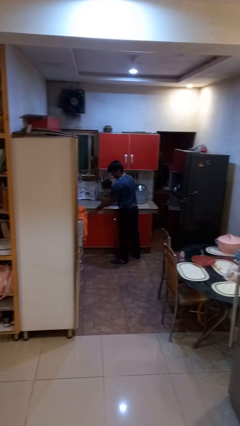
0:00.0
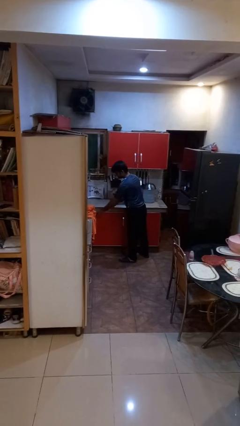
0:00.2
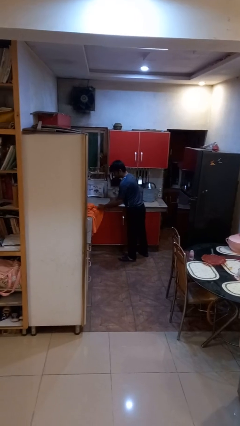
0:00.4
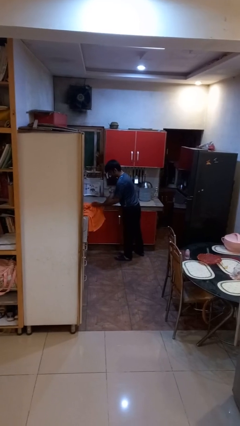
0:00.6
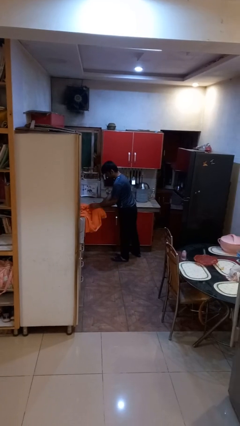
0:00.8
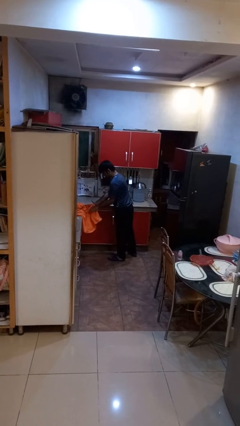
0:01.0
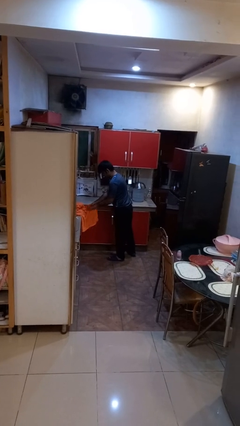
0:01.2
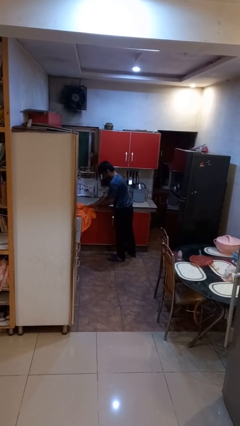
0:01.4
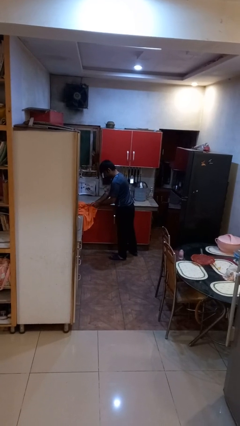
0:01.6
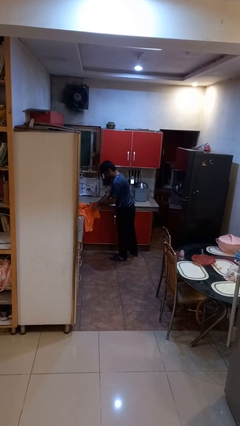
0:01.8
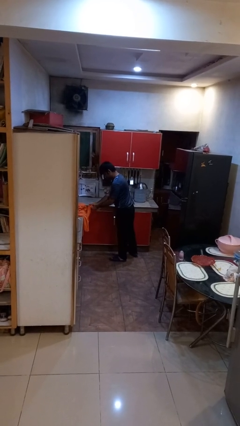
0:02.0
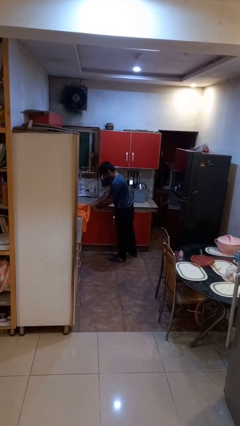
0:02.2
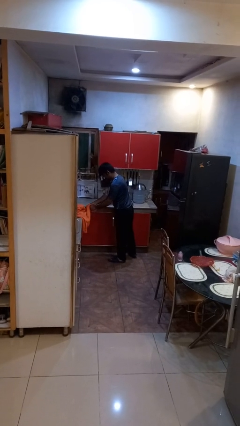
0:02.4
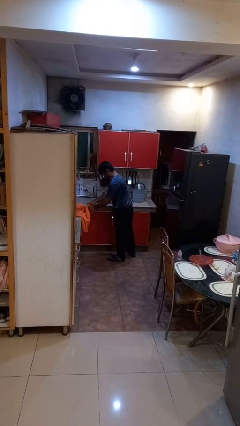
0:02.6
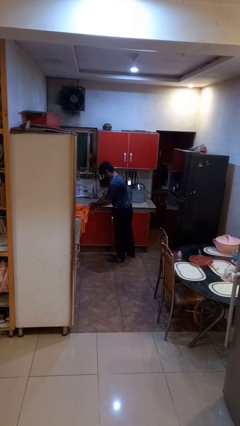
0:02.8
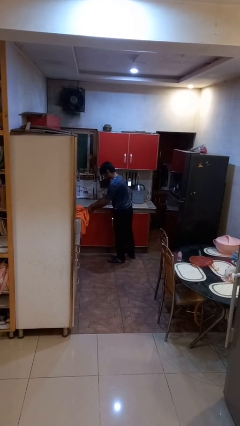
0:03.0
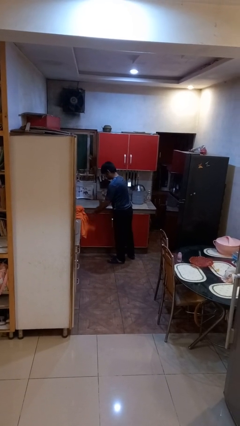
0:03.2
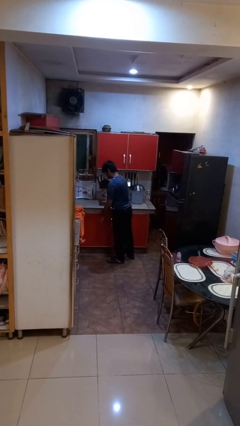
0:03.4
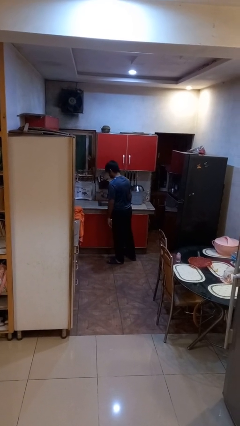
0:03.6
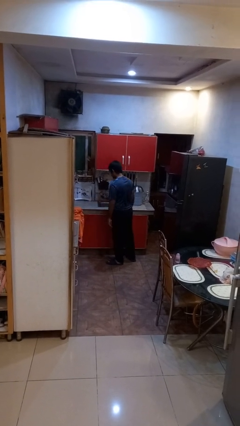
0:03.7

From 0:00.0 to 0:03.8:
person dries hands with towel

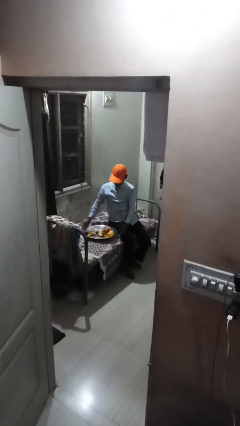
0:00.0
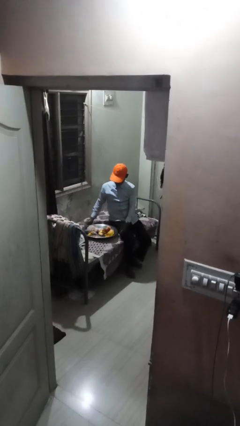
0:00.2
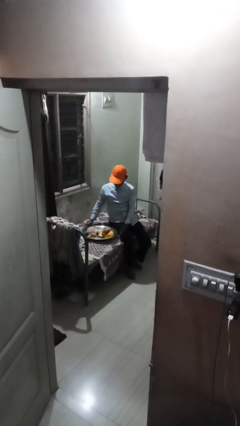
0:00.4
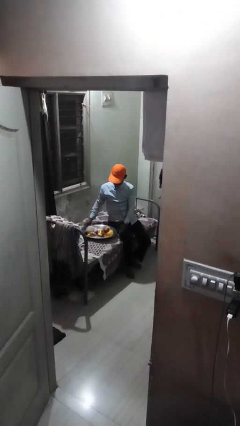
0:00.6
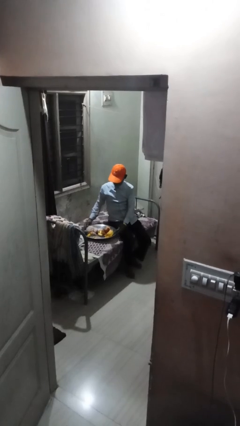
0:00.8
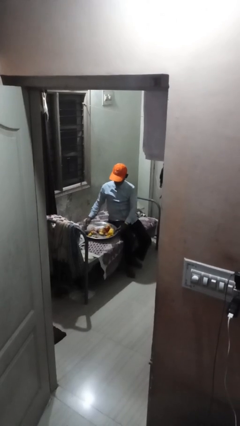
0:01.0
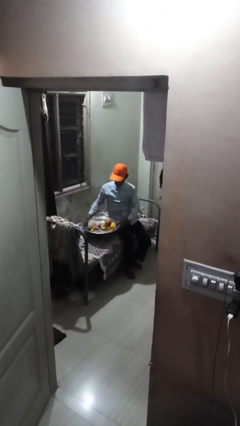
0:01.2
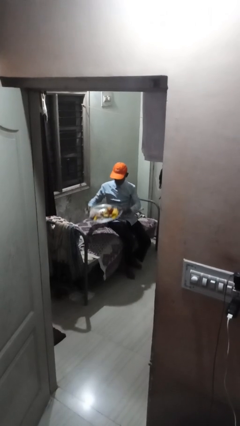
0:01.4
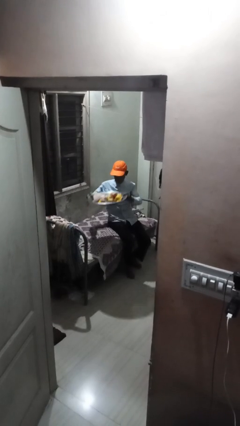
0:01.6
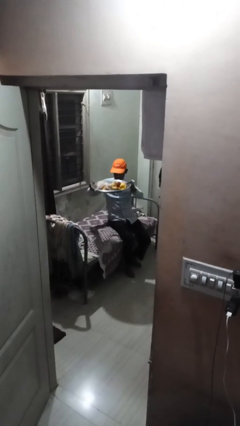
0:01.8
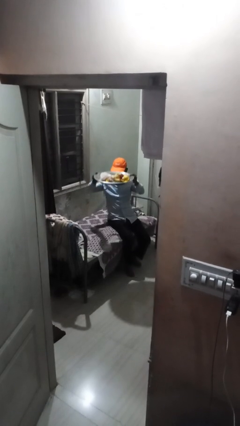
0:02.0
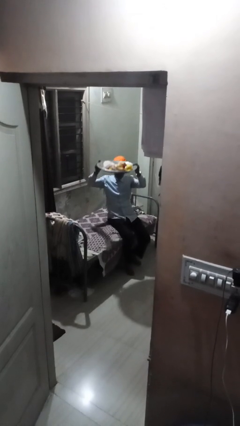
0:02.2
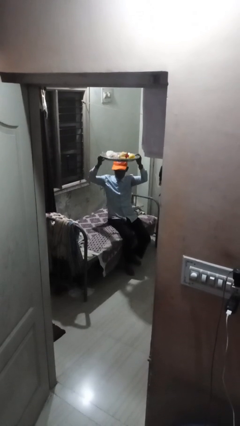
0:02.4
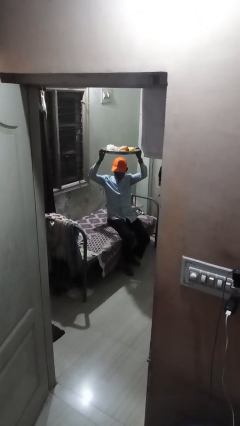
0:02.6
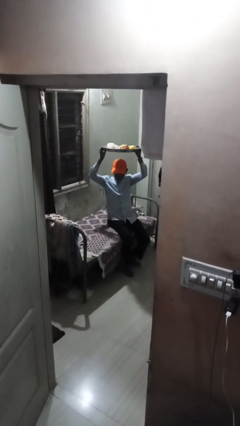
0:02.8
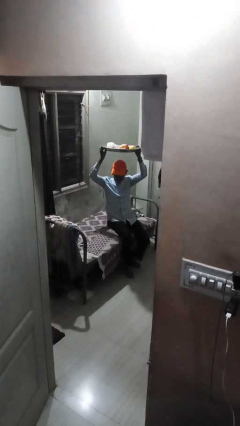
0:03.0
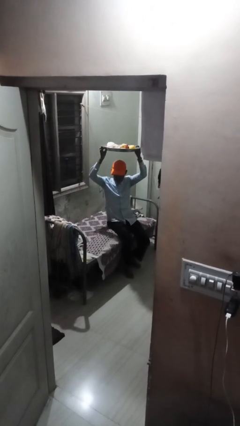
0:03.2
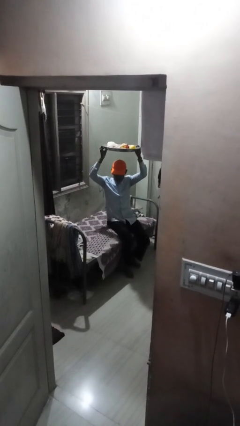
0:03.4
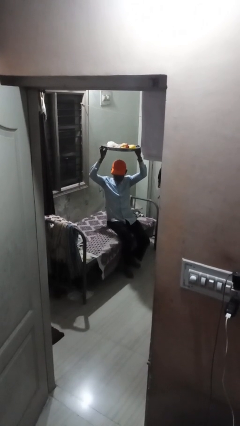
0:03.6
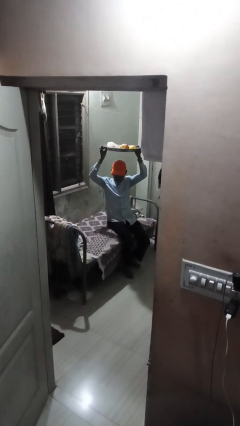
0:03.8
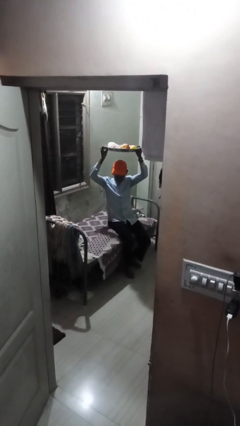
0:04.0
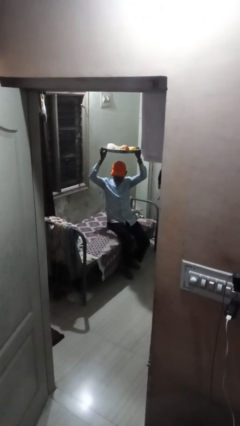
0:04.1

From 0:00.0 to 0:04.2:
person holds object above head

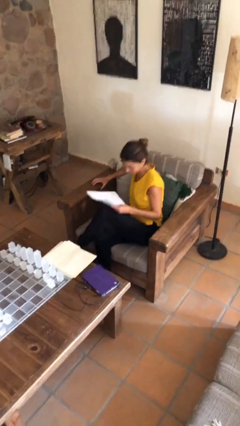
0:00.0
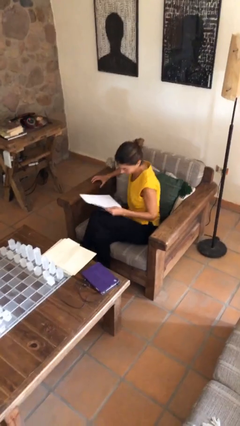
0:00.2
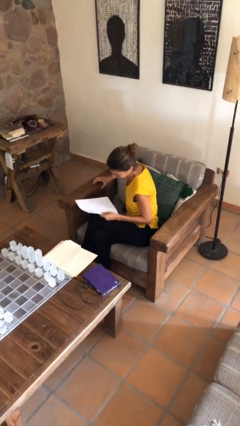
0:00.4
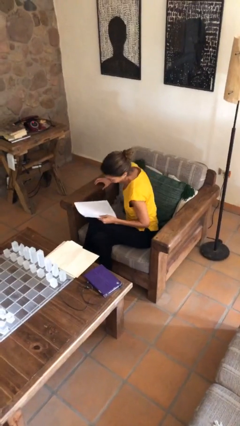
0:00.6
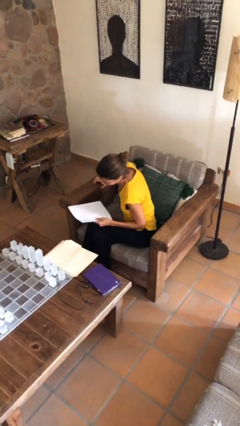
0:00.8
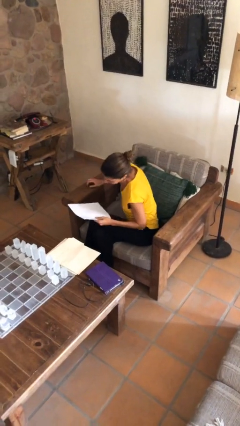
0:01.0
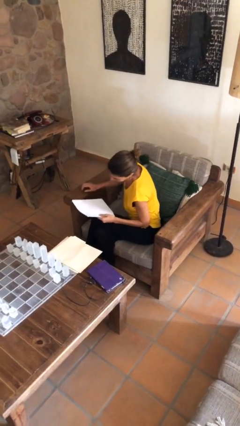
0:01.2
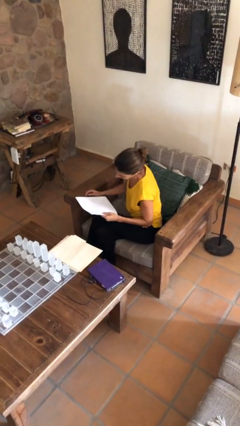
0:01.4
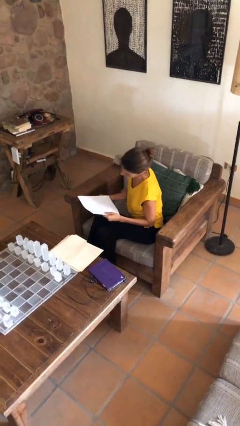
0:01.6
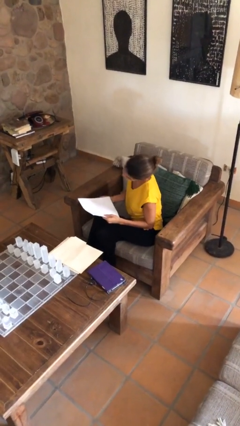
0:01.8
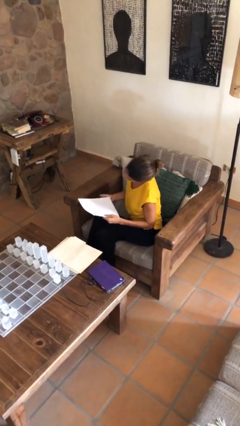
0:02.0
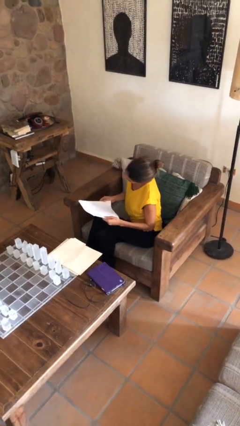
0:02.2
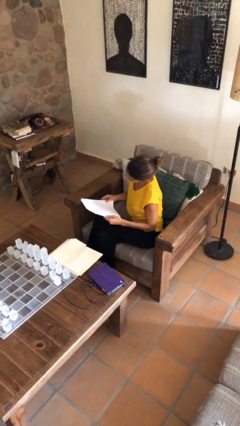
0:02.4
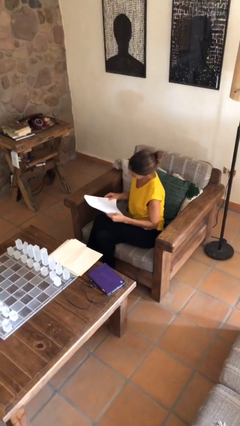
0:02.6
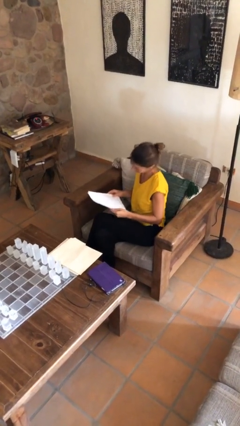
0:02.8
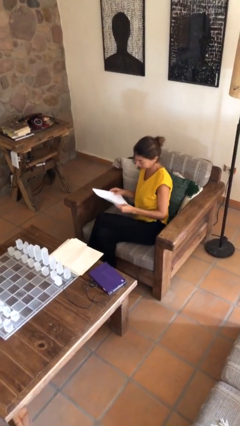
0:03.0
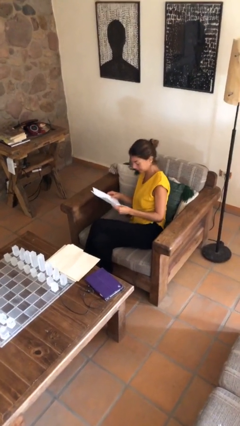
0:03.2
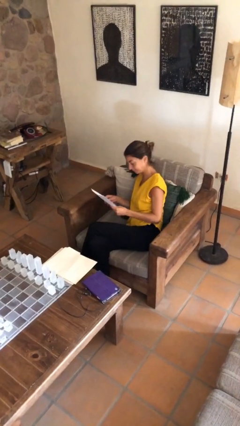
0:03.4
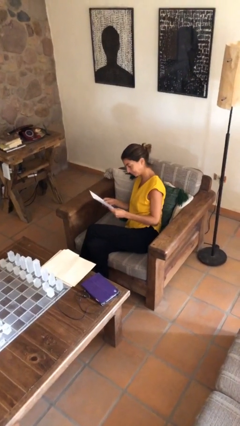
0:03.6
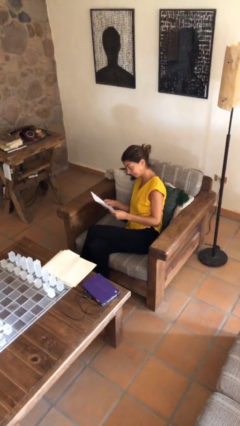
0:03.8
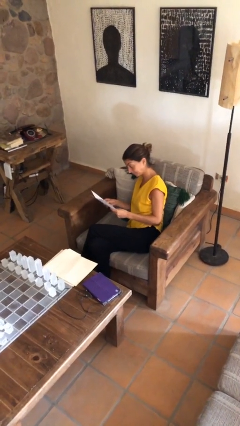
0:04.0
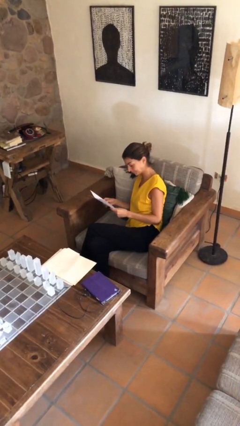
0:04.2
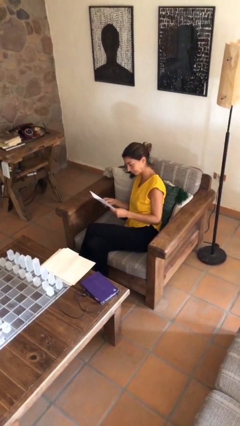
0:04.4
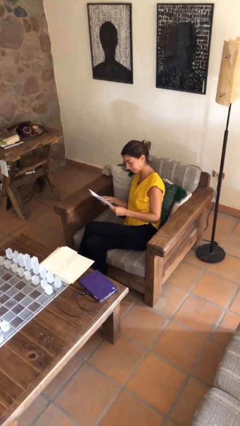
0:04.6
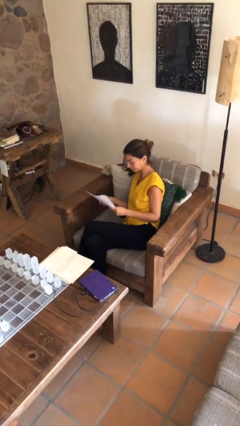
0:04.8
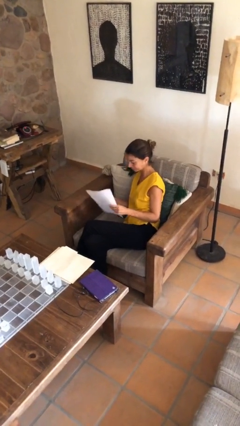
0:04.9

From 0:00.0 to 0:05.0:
person reads document

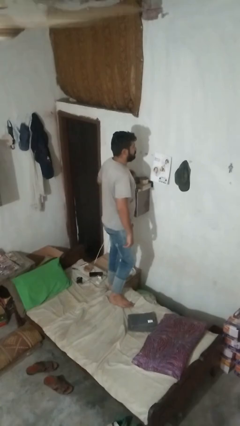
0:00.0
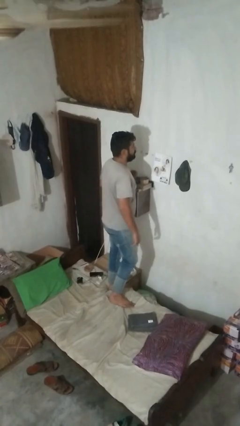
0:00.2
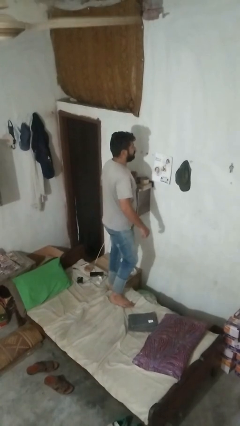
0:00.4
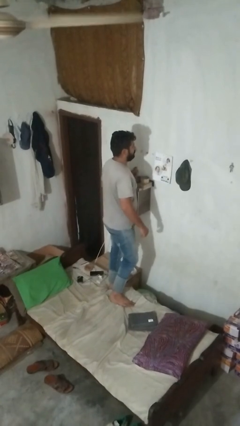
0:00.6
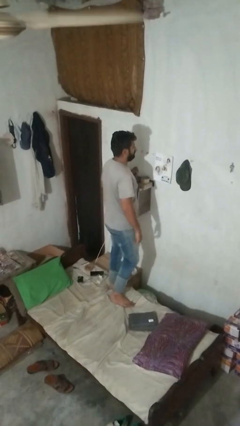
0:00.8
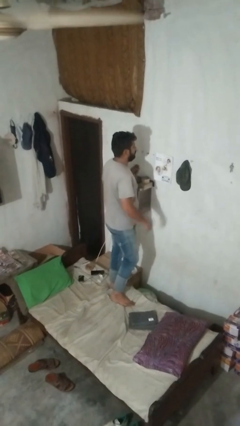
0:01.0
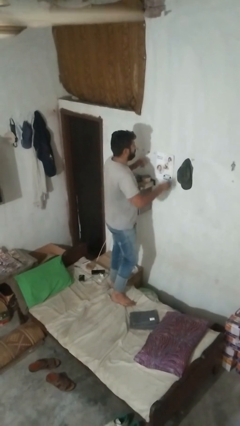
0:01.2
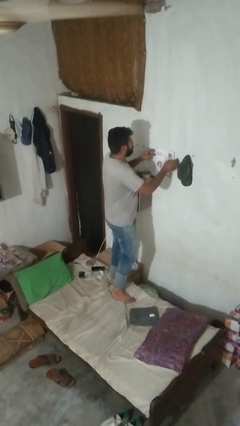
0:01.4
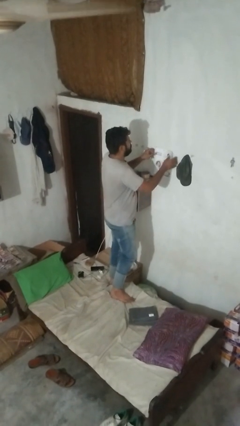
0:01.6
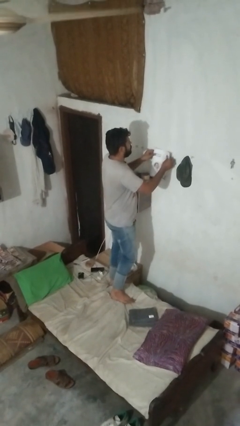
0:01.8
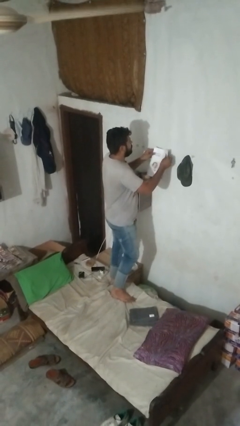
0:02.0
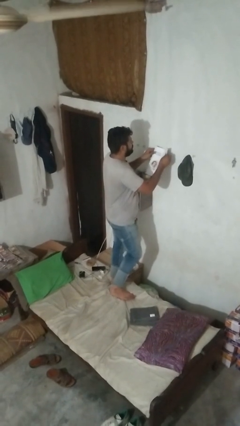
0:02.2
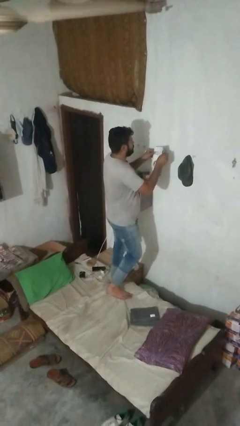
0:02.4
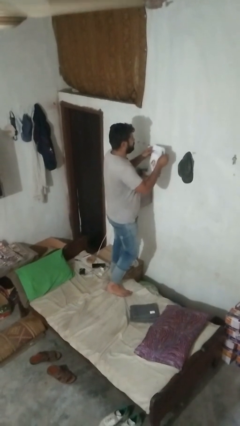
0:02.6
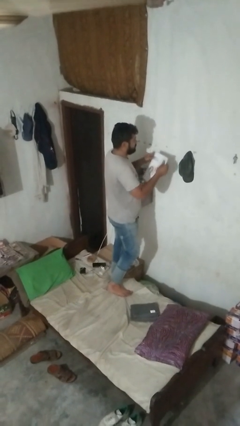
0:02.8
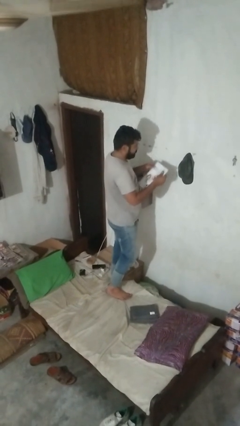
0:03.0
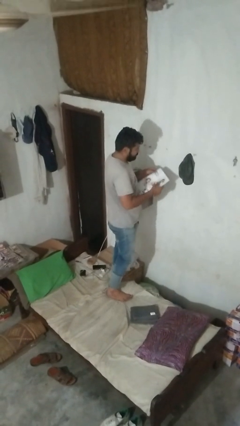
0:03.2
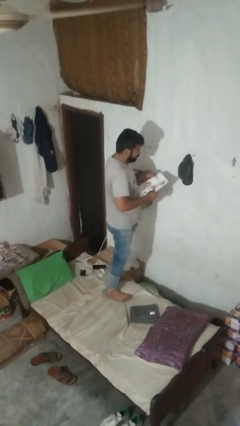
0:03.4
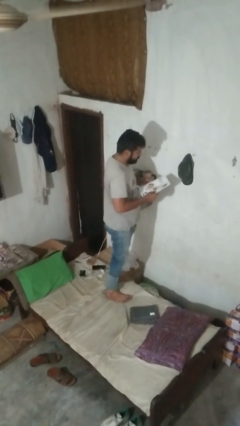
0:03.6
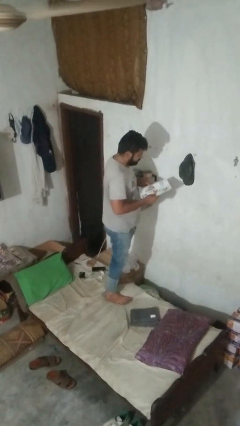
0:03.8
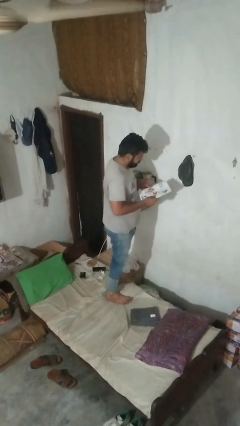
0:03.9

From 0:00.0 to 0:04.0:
person takes down picture frame

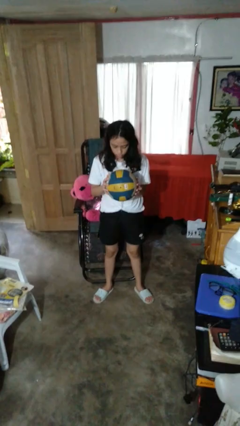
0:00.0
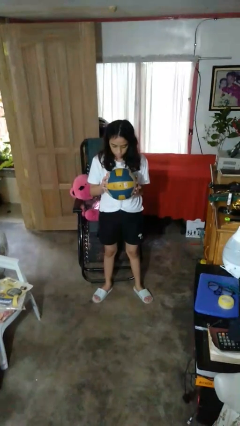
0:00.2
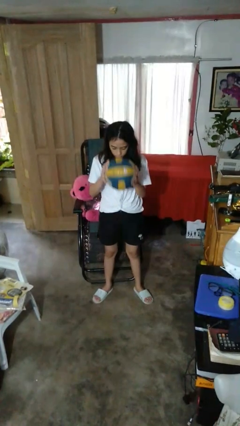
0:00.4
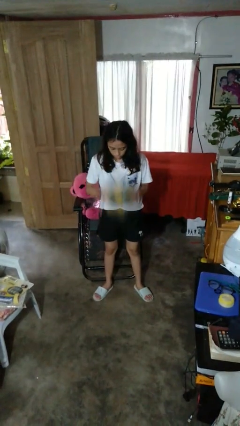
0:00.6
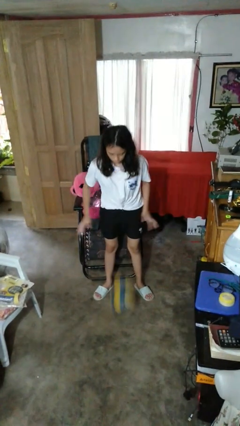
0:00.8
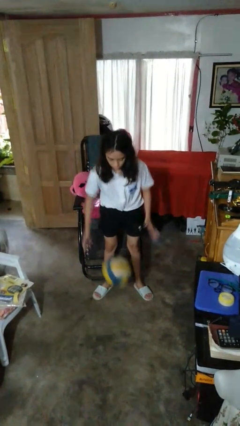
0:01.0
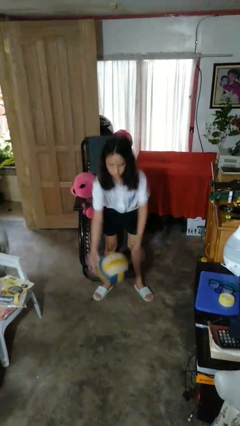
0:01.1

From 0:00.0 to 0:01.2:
person bounces ball on floor
